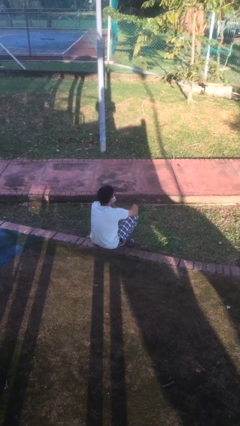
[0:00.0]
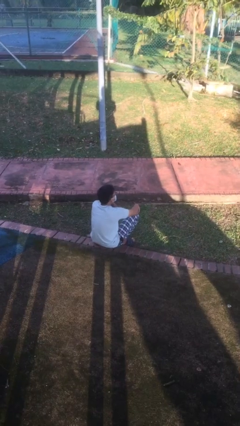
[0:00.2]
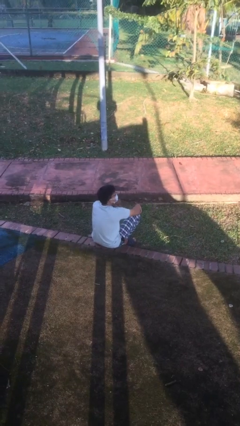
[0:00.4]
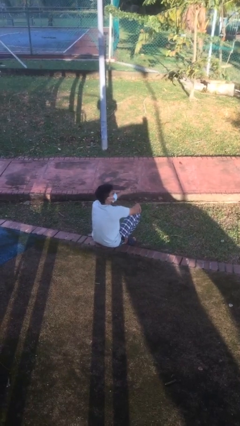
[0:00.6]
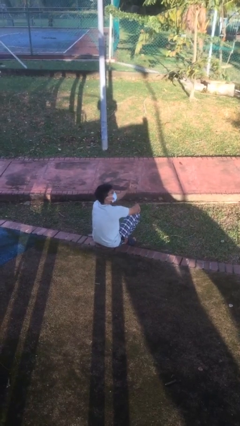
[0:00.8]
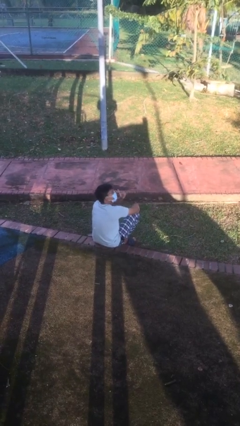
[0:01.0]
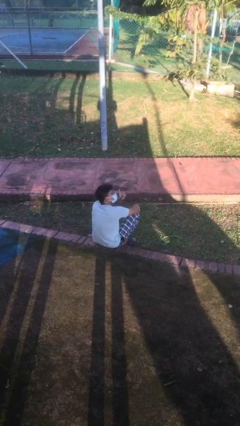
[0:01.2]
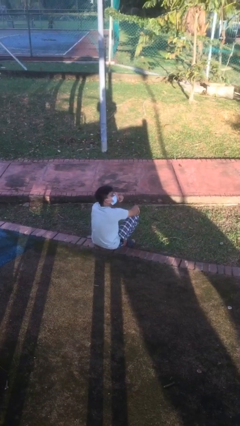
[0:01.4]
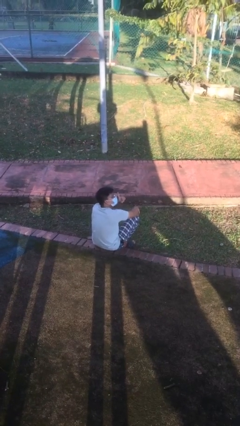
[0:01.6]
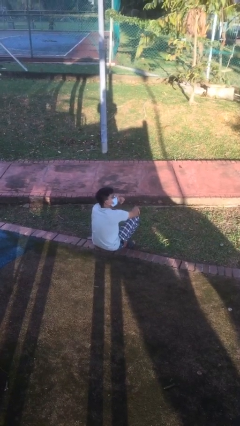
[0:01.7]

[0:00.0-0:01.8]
person gestures be quiet

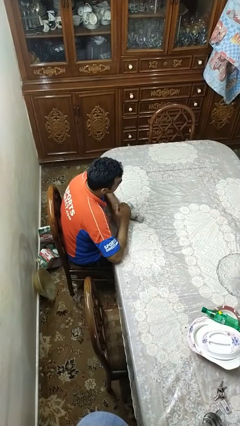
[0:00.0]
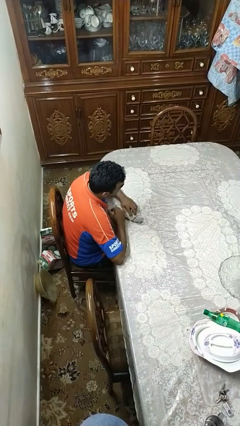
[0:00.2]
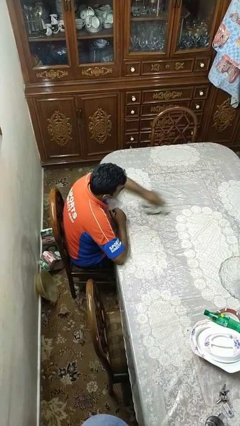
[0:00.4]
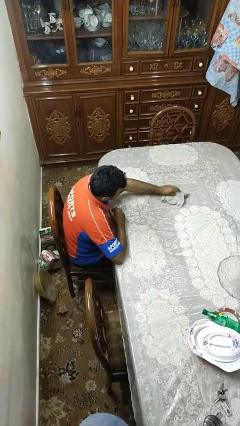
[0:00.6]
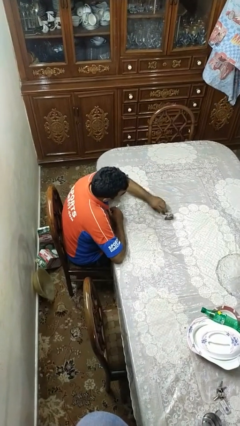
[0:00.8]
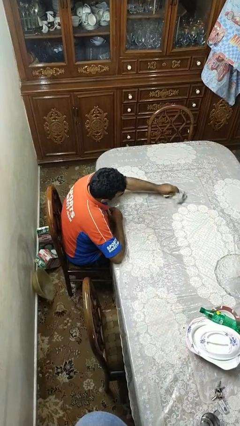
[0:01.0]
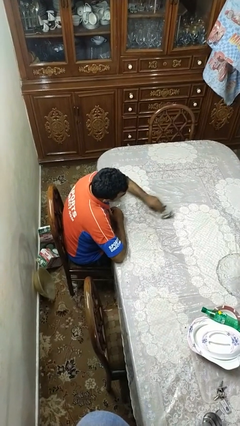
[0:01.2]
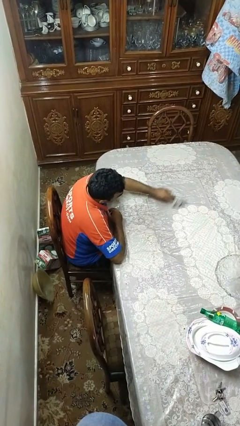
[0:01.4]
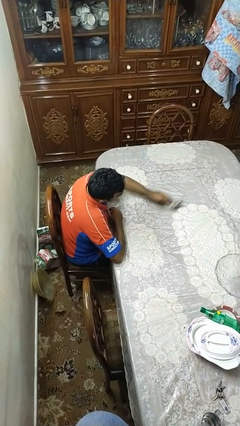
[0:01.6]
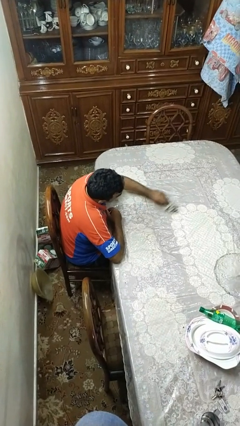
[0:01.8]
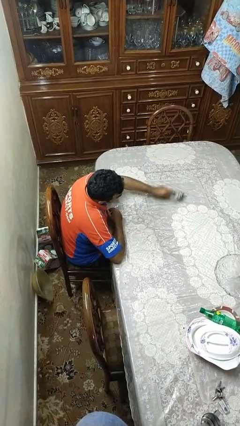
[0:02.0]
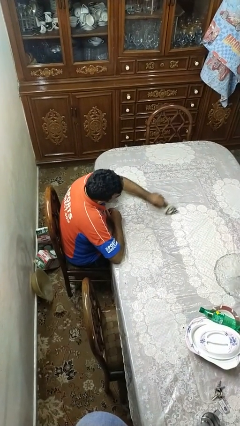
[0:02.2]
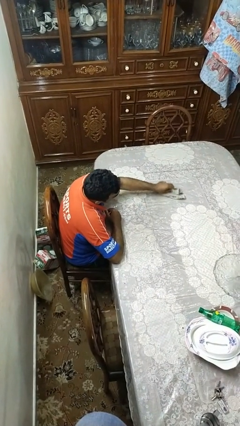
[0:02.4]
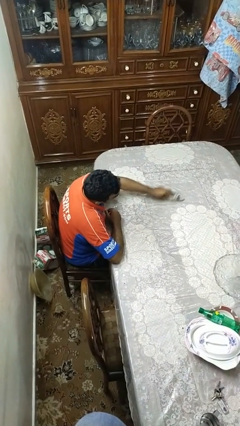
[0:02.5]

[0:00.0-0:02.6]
person cleans table with rag

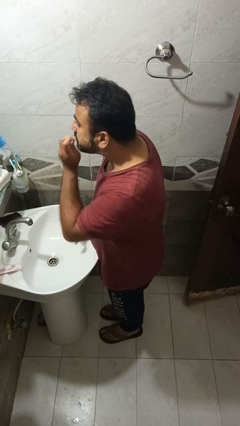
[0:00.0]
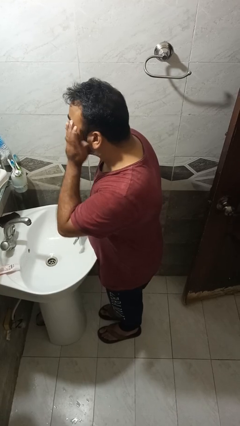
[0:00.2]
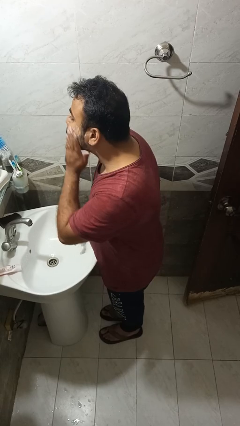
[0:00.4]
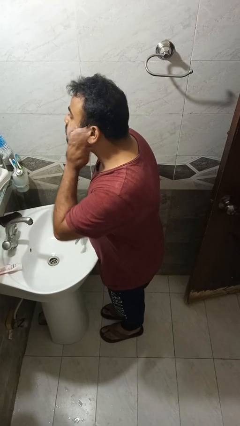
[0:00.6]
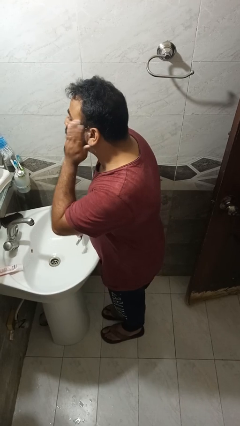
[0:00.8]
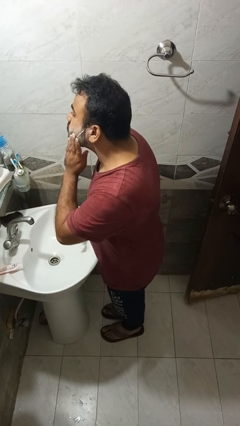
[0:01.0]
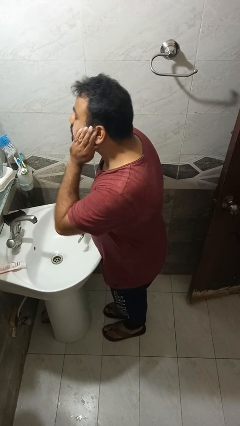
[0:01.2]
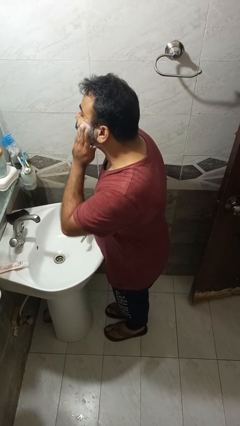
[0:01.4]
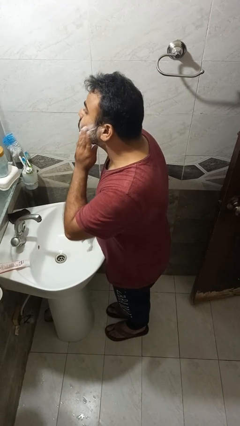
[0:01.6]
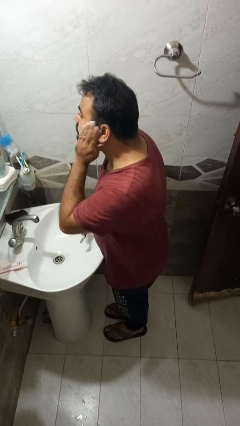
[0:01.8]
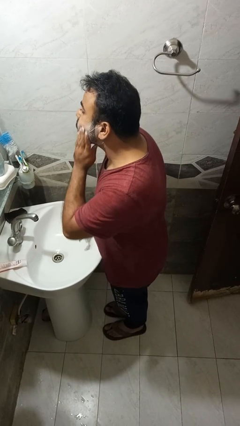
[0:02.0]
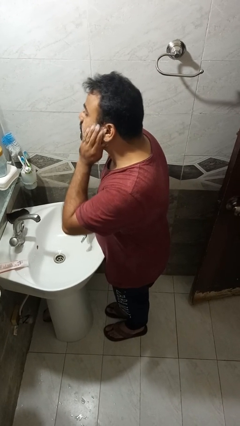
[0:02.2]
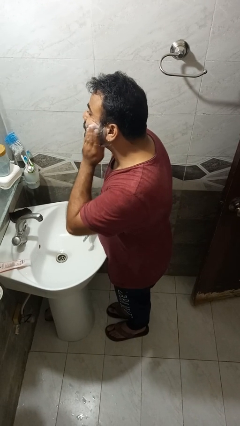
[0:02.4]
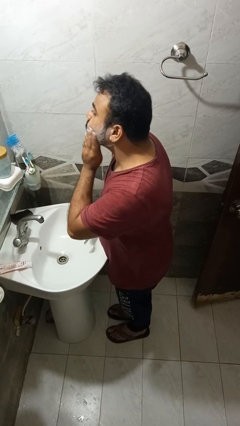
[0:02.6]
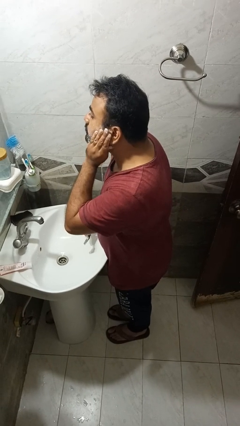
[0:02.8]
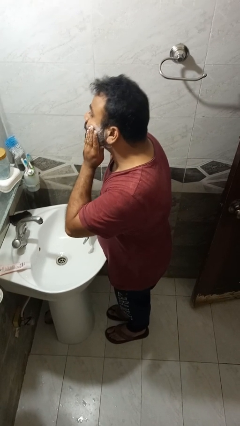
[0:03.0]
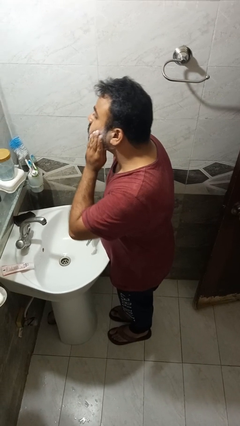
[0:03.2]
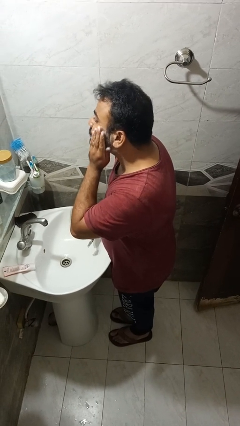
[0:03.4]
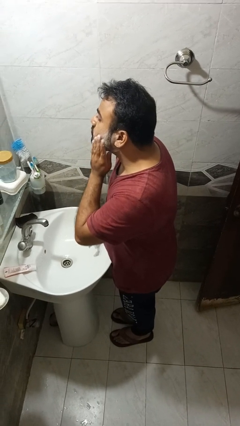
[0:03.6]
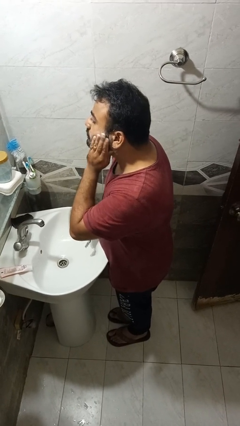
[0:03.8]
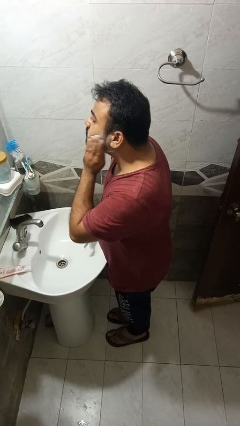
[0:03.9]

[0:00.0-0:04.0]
person applies shaving cream

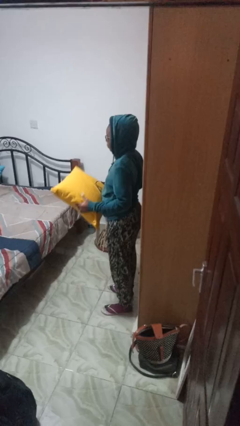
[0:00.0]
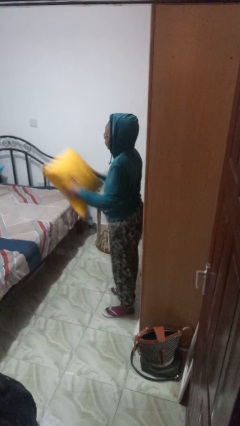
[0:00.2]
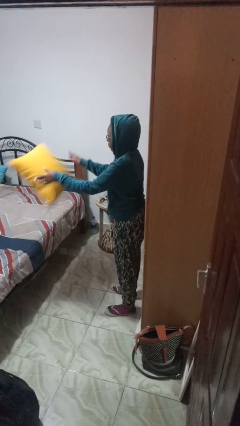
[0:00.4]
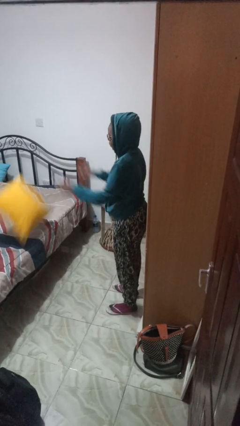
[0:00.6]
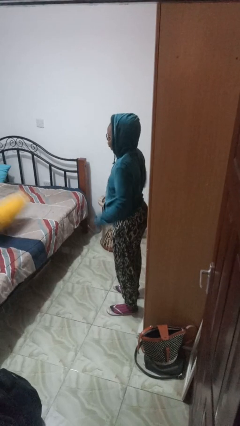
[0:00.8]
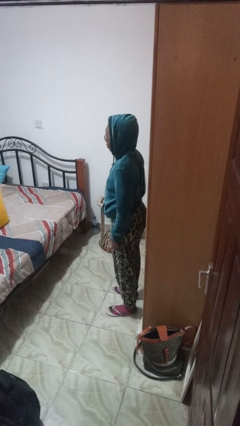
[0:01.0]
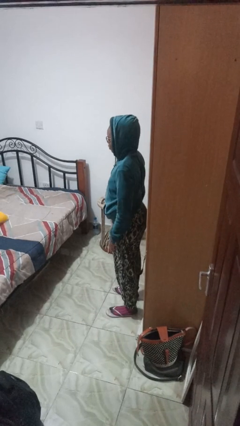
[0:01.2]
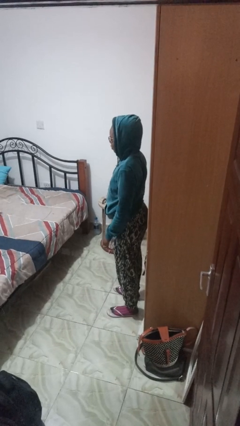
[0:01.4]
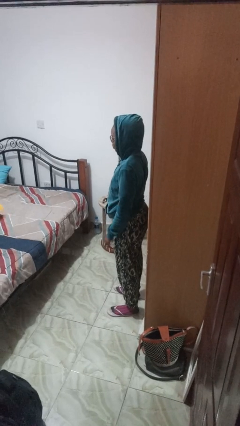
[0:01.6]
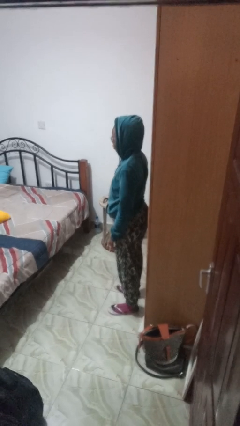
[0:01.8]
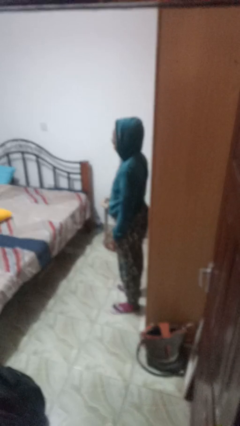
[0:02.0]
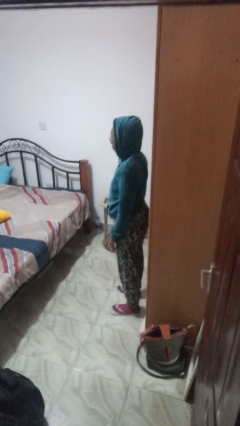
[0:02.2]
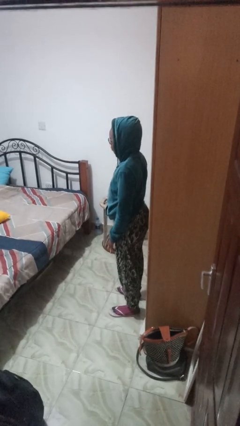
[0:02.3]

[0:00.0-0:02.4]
person throws object on bed

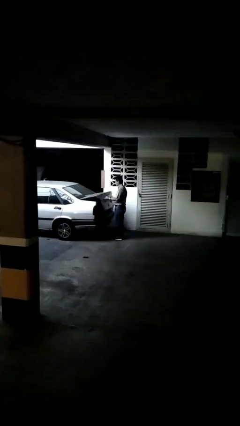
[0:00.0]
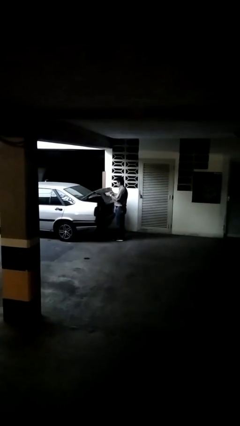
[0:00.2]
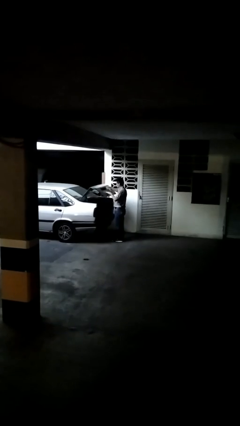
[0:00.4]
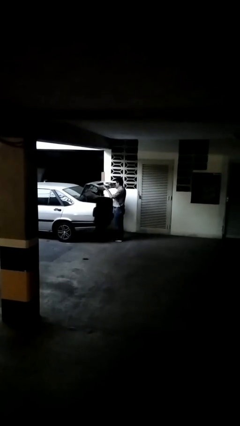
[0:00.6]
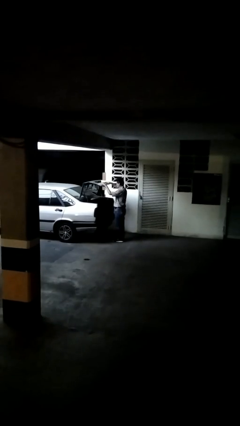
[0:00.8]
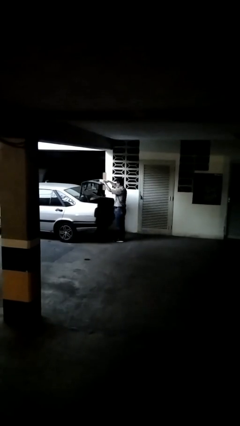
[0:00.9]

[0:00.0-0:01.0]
person opens car trunk

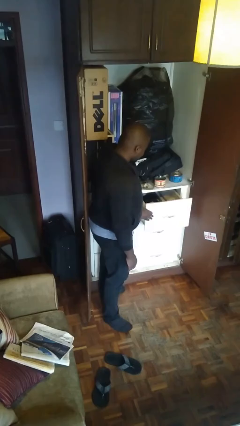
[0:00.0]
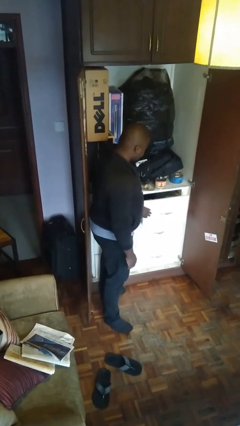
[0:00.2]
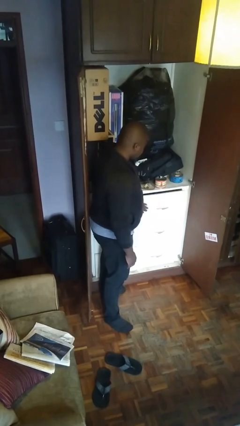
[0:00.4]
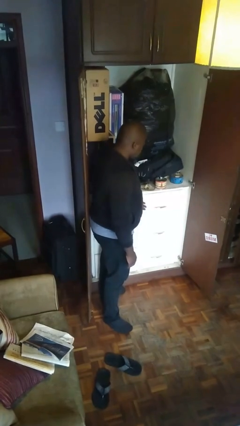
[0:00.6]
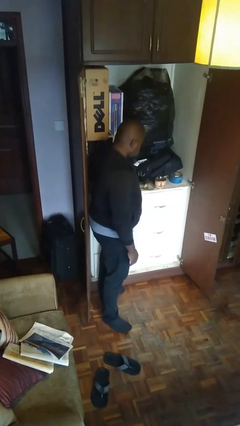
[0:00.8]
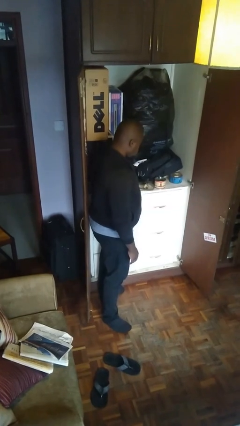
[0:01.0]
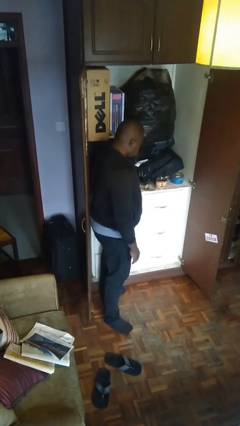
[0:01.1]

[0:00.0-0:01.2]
person closes dresser drawer

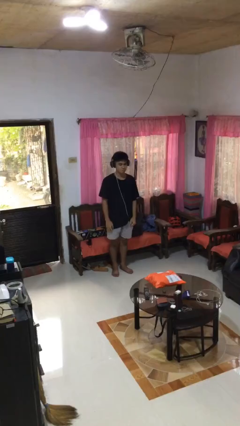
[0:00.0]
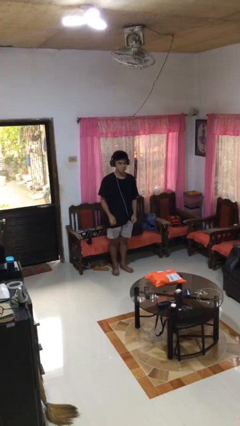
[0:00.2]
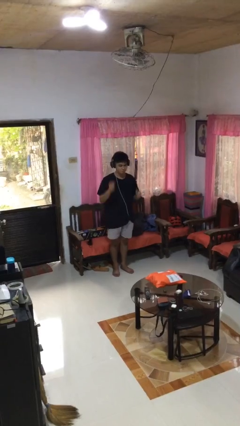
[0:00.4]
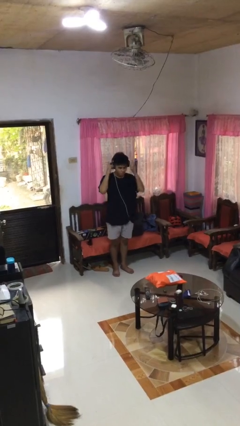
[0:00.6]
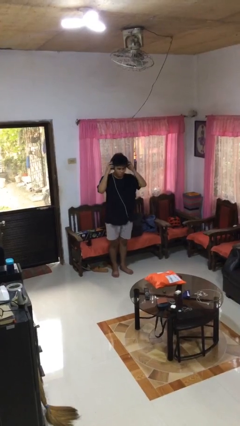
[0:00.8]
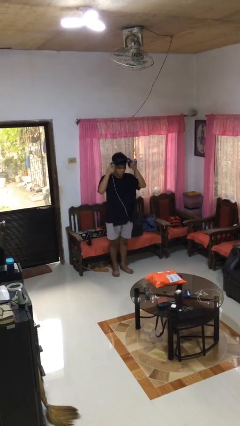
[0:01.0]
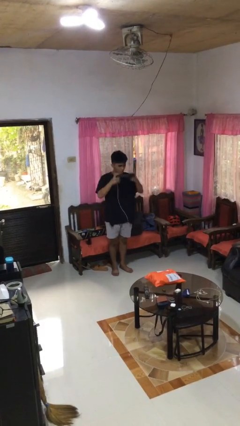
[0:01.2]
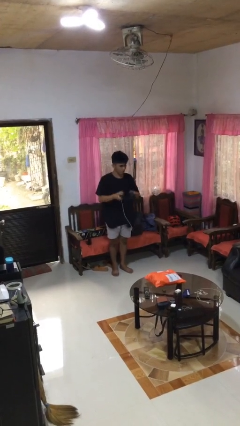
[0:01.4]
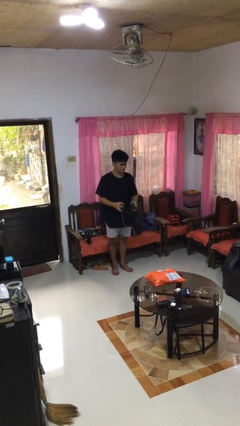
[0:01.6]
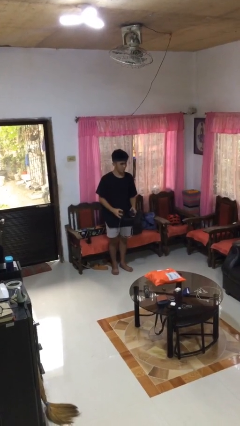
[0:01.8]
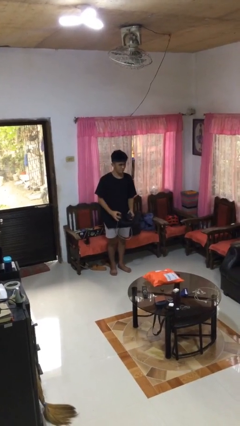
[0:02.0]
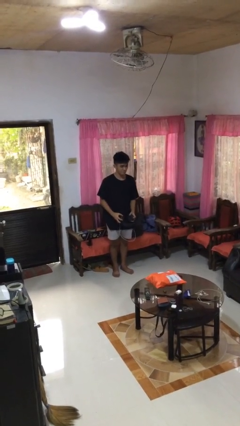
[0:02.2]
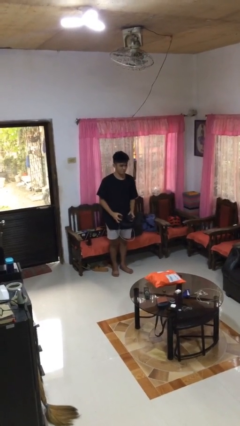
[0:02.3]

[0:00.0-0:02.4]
person takes off headphones

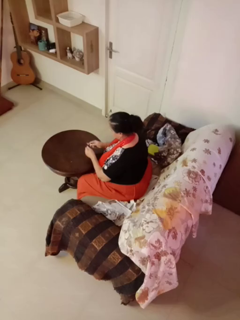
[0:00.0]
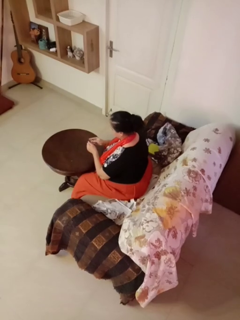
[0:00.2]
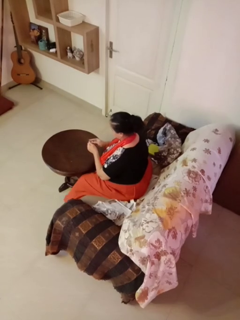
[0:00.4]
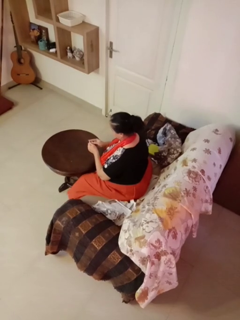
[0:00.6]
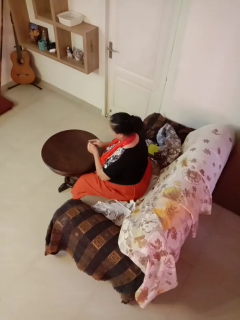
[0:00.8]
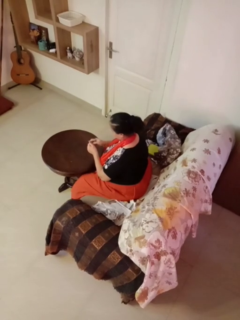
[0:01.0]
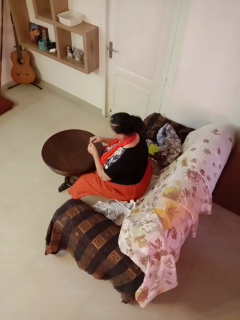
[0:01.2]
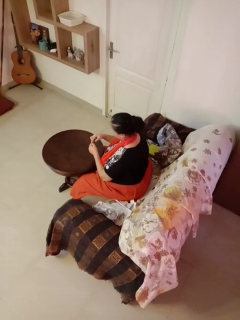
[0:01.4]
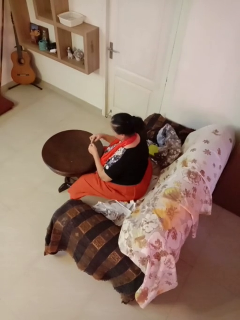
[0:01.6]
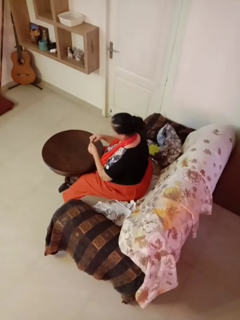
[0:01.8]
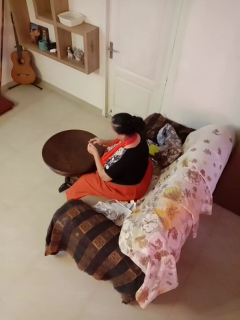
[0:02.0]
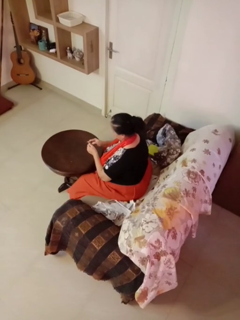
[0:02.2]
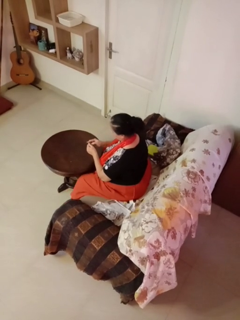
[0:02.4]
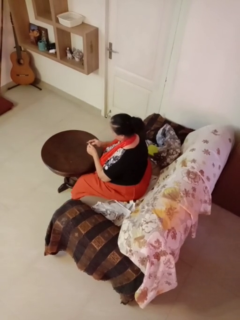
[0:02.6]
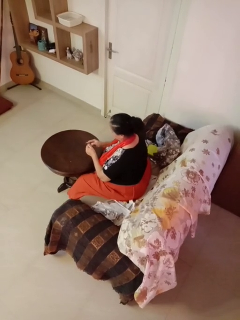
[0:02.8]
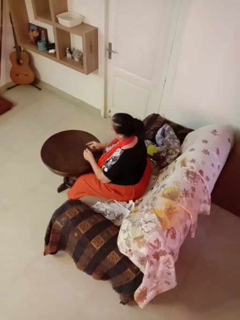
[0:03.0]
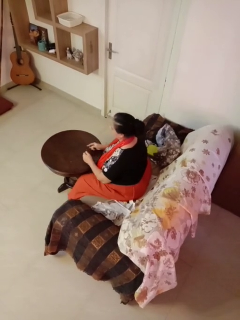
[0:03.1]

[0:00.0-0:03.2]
person files fingernails
